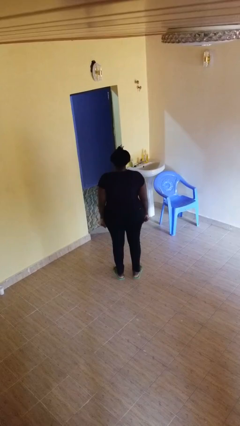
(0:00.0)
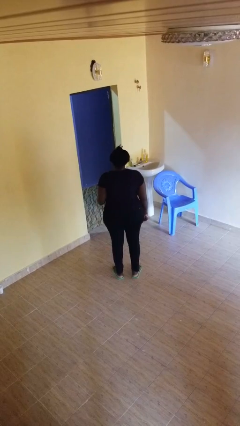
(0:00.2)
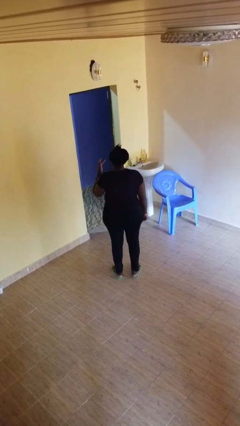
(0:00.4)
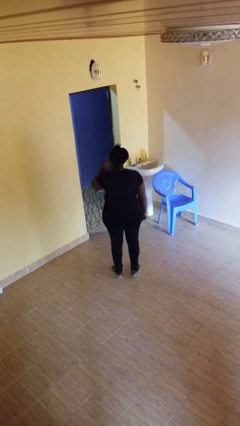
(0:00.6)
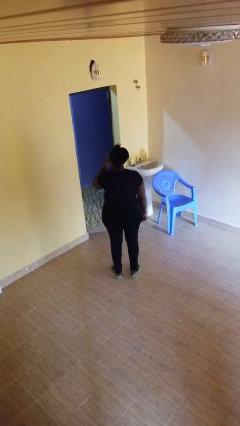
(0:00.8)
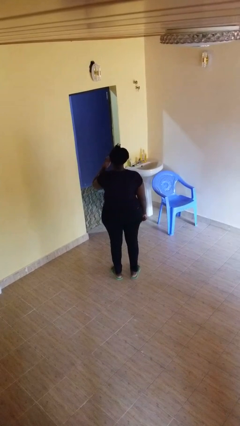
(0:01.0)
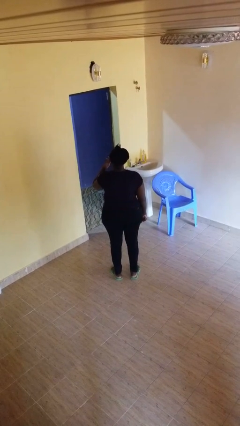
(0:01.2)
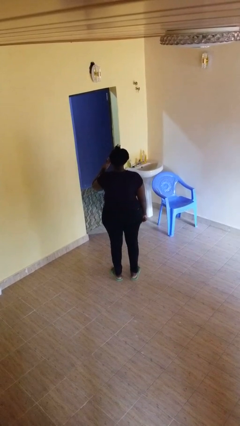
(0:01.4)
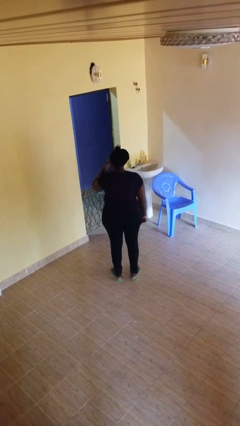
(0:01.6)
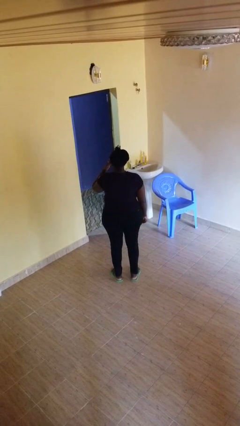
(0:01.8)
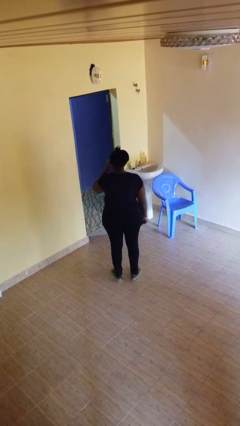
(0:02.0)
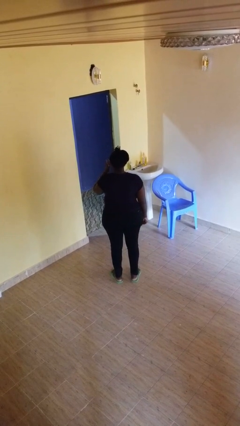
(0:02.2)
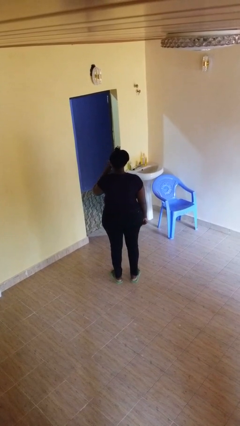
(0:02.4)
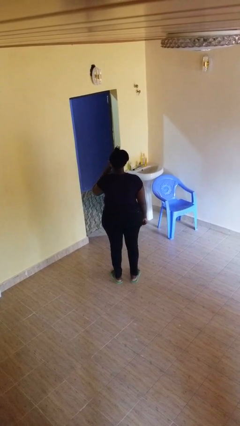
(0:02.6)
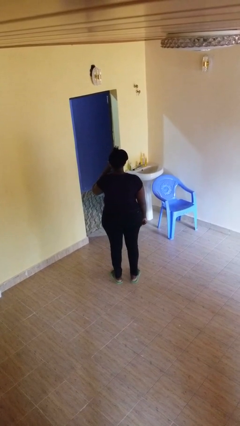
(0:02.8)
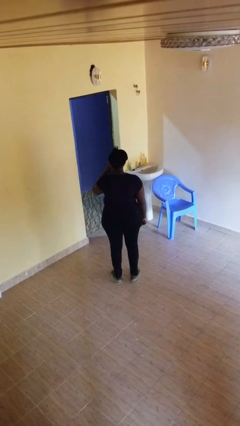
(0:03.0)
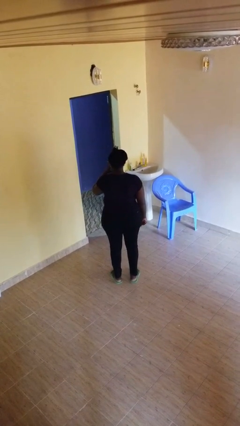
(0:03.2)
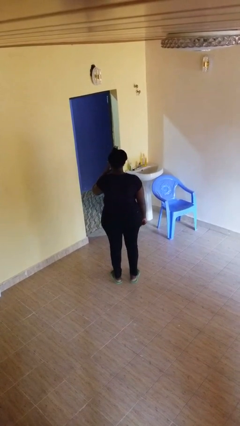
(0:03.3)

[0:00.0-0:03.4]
person licks fingers

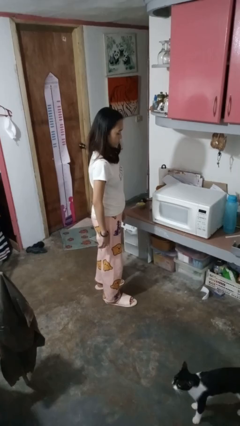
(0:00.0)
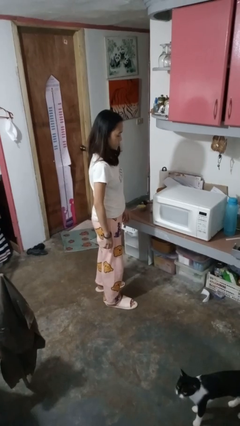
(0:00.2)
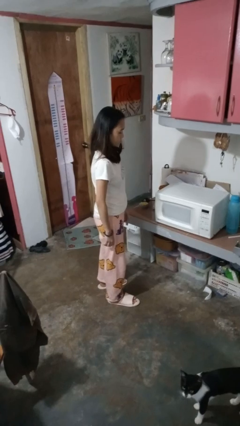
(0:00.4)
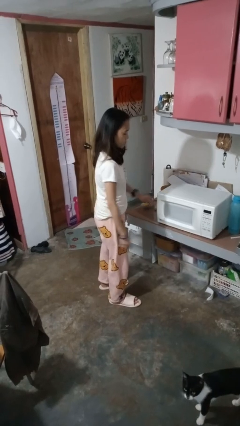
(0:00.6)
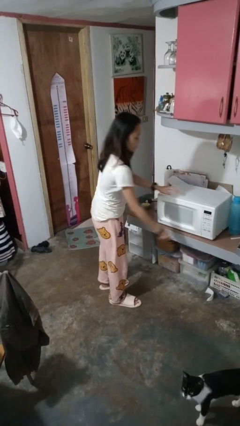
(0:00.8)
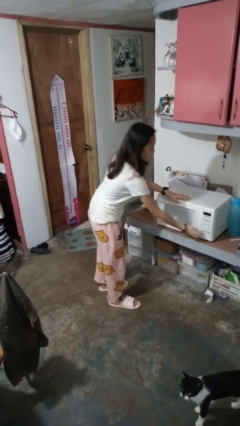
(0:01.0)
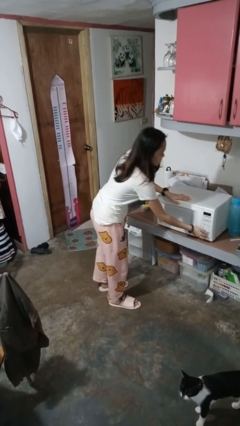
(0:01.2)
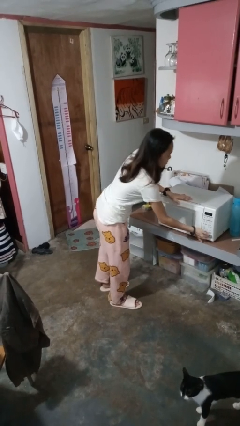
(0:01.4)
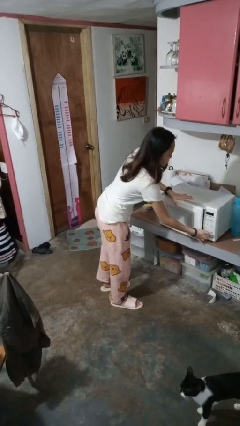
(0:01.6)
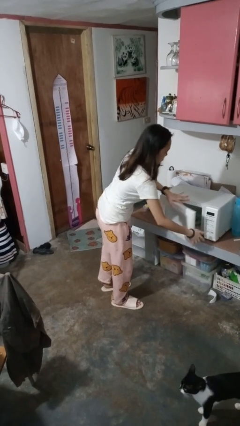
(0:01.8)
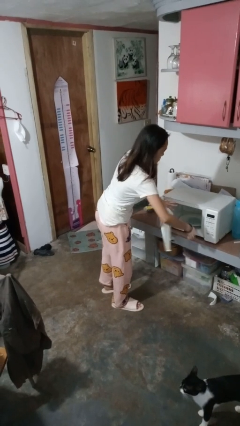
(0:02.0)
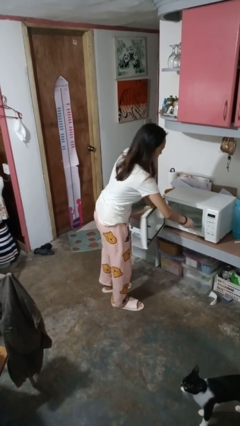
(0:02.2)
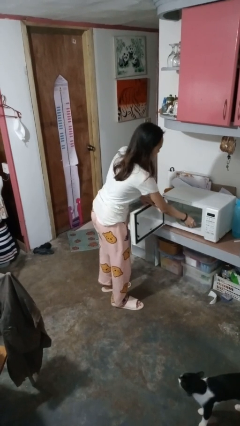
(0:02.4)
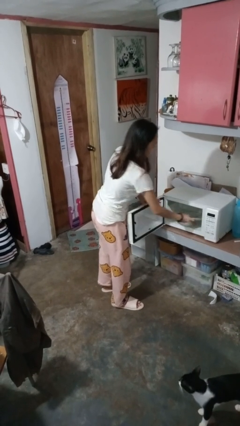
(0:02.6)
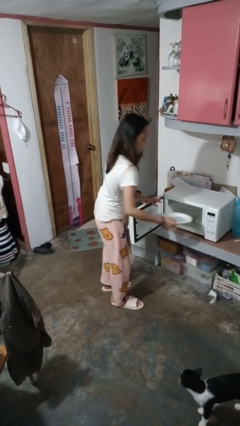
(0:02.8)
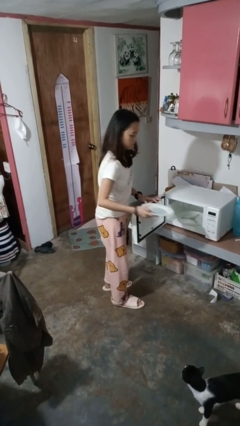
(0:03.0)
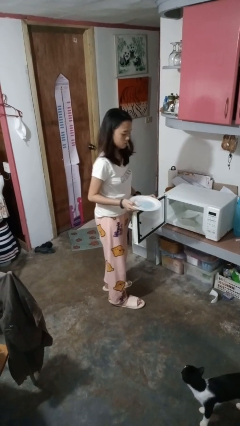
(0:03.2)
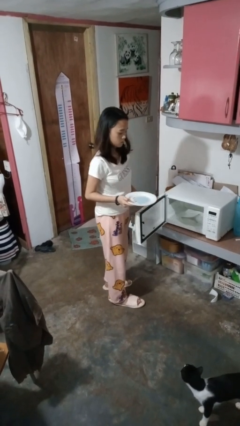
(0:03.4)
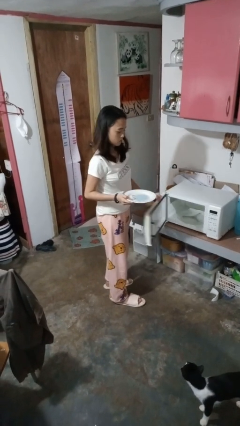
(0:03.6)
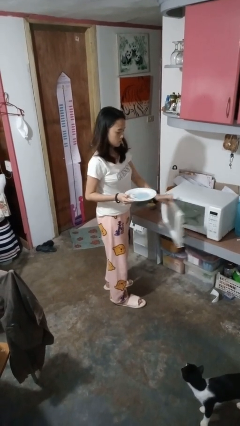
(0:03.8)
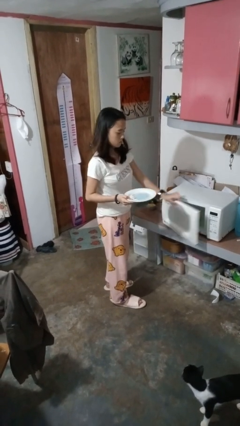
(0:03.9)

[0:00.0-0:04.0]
person takes object from microwave

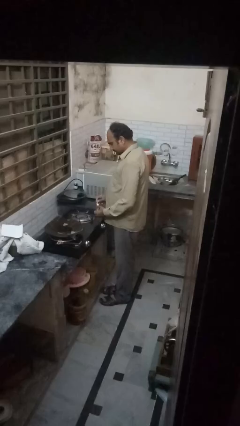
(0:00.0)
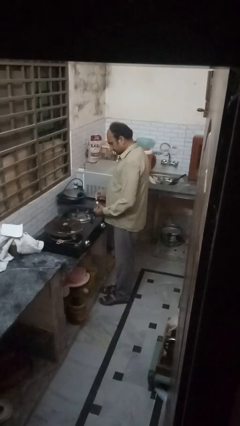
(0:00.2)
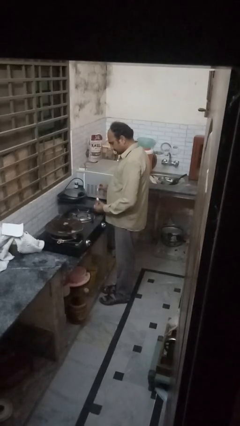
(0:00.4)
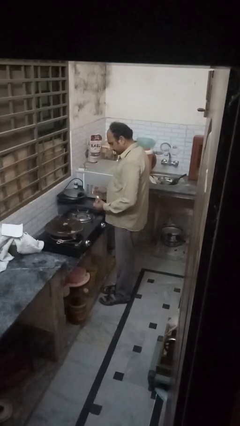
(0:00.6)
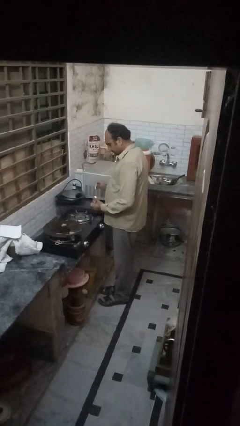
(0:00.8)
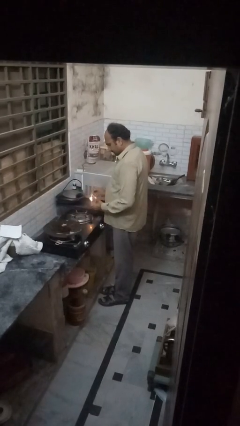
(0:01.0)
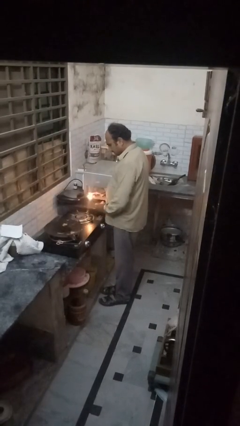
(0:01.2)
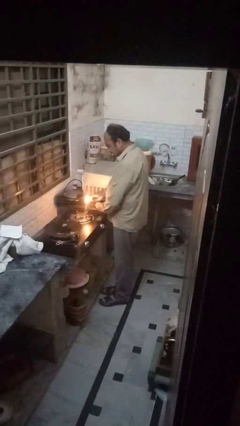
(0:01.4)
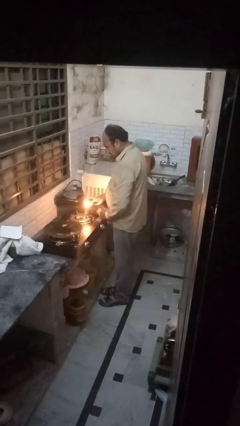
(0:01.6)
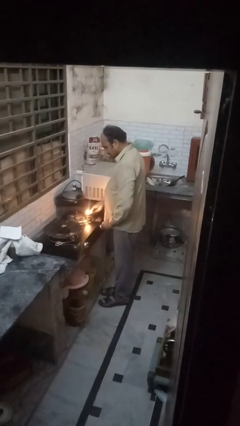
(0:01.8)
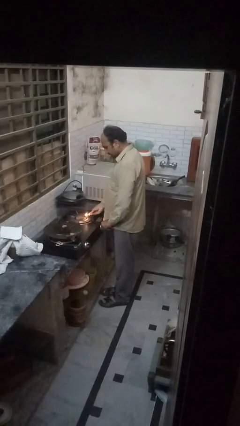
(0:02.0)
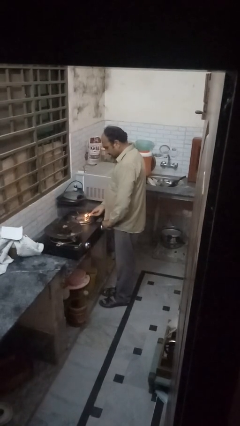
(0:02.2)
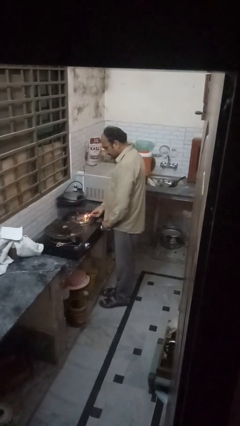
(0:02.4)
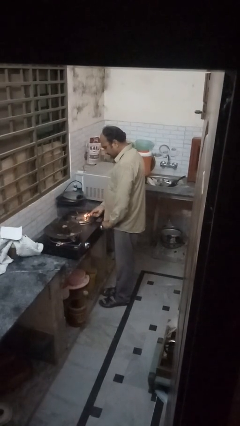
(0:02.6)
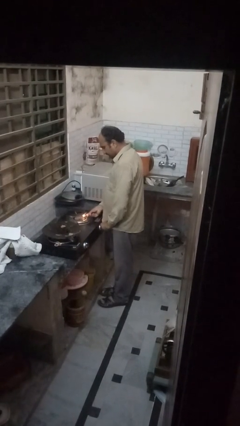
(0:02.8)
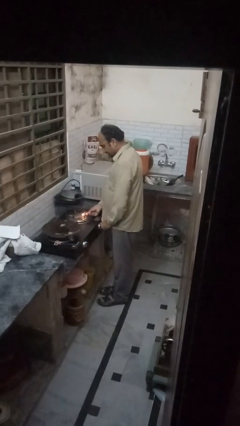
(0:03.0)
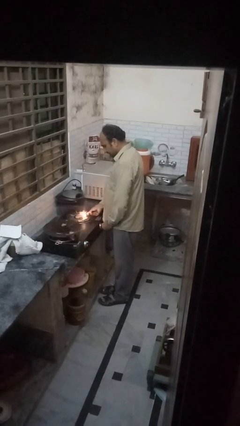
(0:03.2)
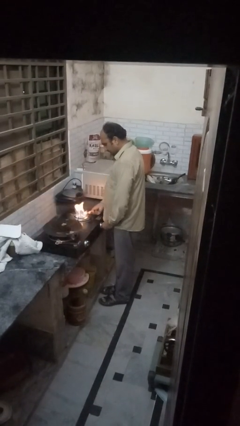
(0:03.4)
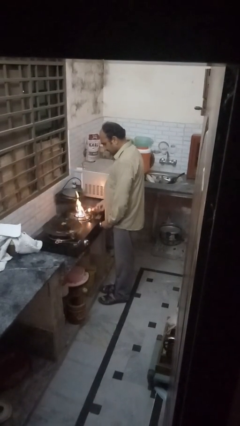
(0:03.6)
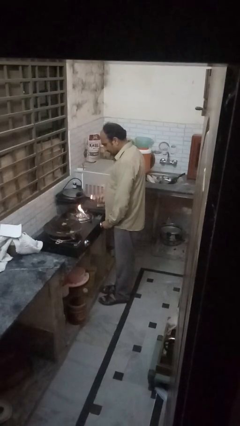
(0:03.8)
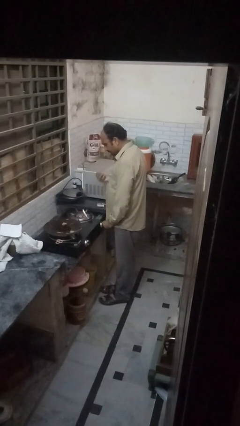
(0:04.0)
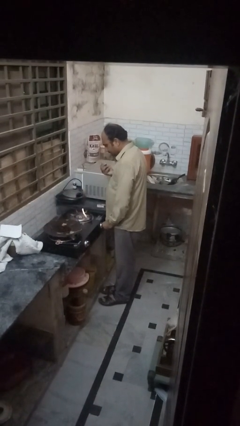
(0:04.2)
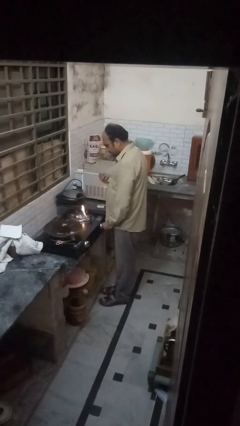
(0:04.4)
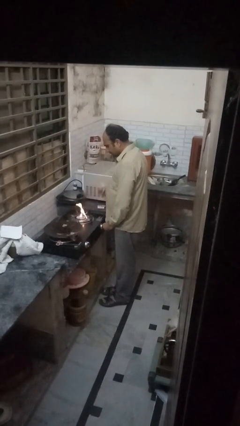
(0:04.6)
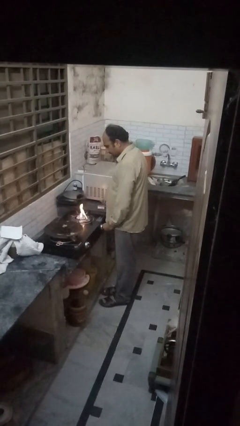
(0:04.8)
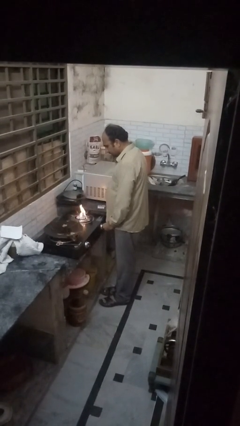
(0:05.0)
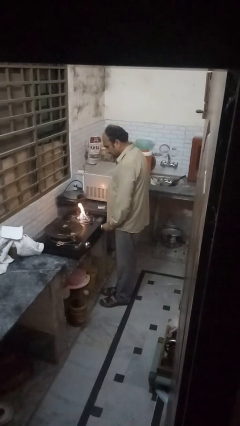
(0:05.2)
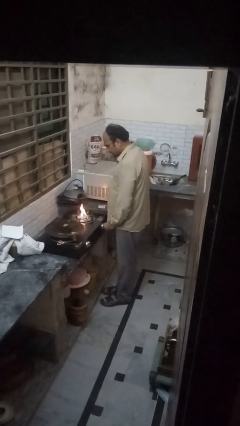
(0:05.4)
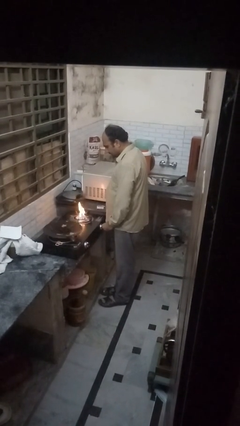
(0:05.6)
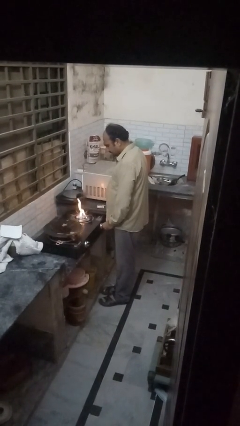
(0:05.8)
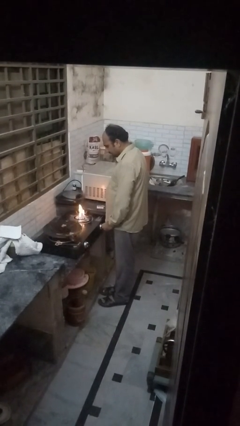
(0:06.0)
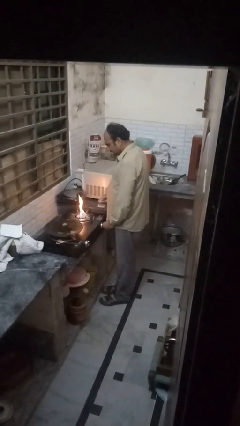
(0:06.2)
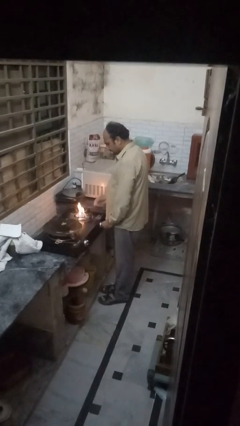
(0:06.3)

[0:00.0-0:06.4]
person turns on stovetop

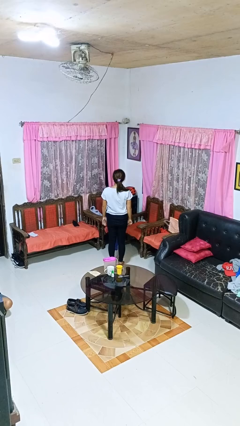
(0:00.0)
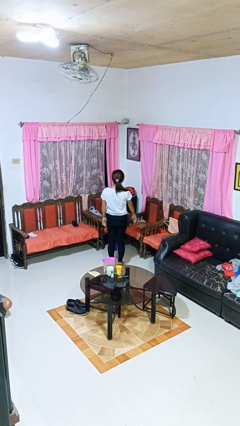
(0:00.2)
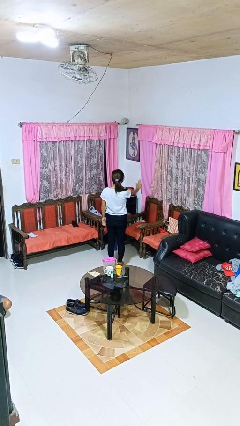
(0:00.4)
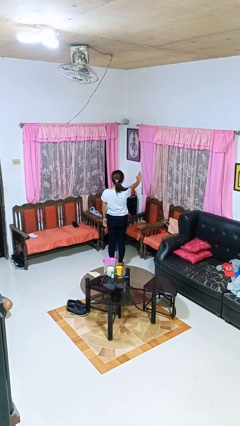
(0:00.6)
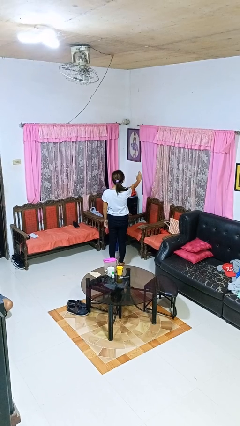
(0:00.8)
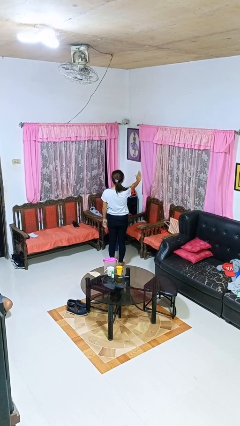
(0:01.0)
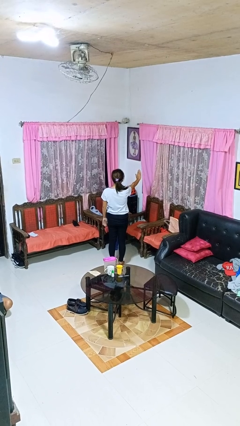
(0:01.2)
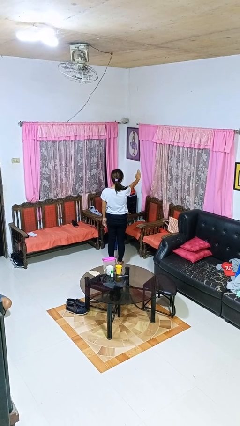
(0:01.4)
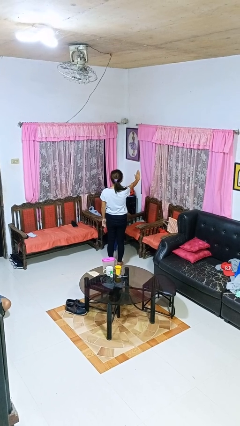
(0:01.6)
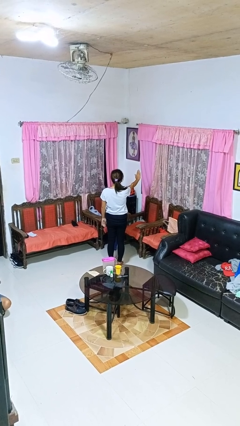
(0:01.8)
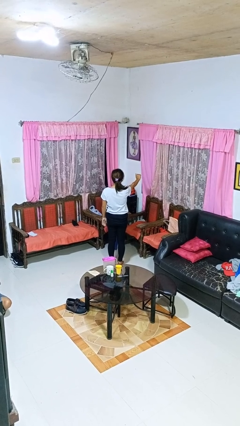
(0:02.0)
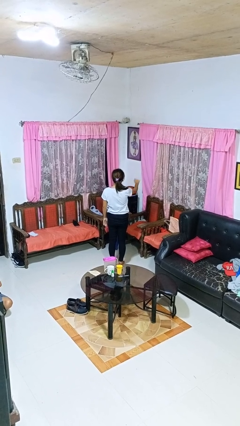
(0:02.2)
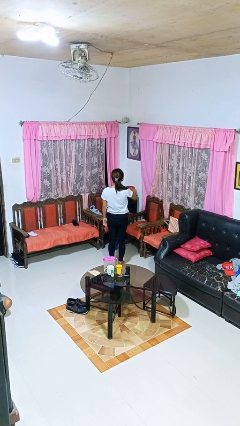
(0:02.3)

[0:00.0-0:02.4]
person gestures stop

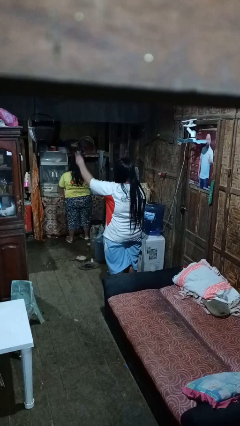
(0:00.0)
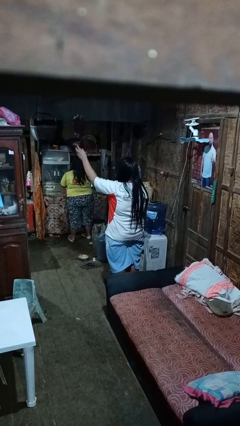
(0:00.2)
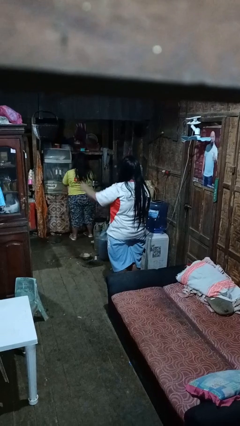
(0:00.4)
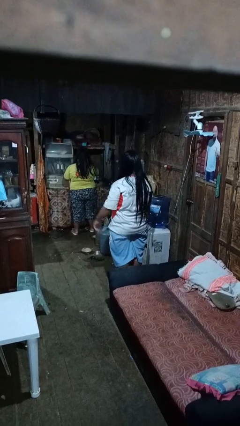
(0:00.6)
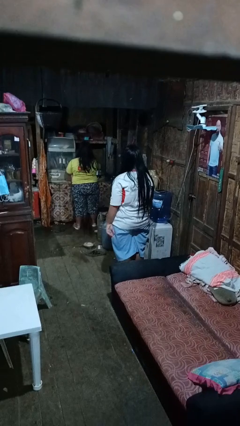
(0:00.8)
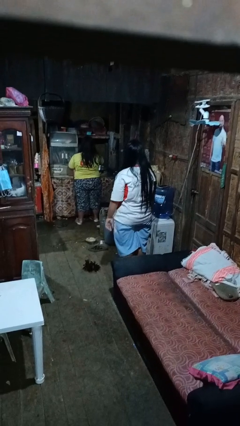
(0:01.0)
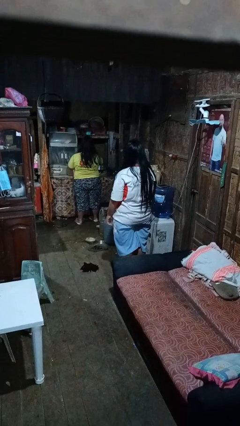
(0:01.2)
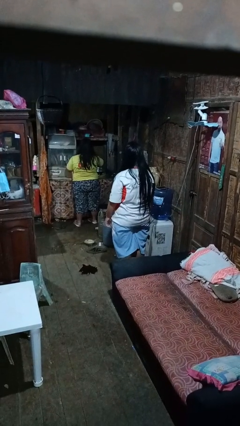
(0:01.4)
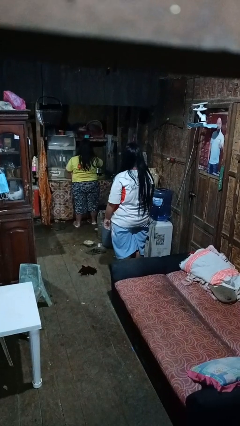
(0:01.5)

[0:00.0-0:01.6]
person throws object into air
